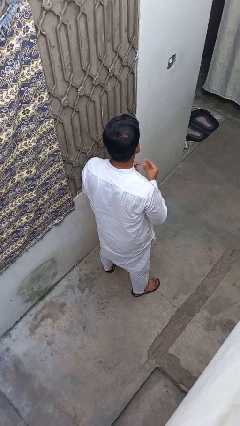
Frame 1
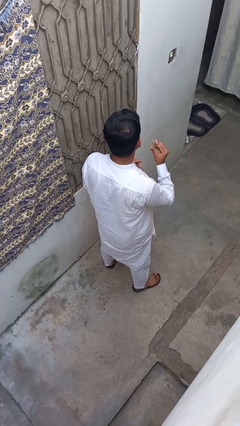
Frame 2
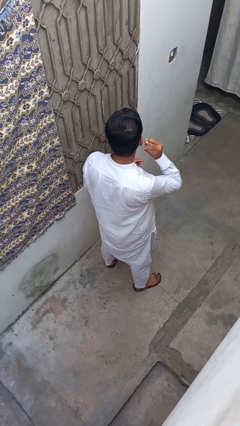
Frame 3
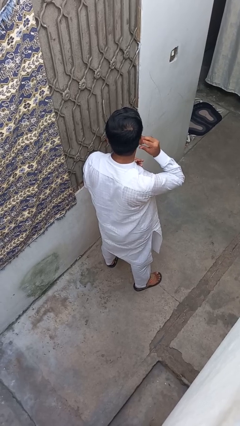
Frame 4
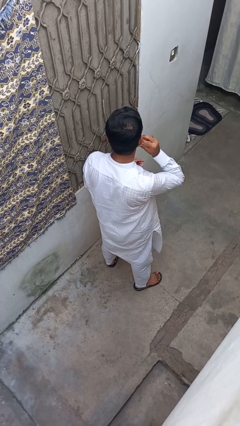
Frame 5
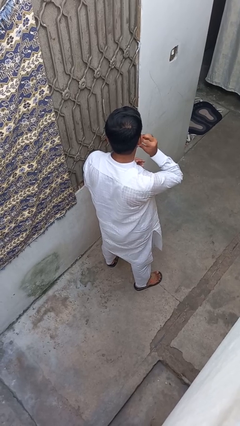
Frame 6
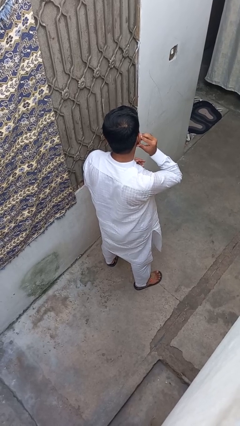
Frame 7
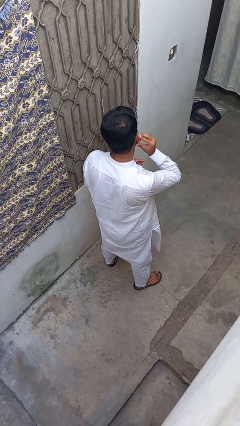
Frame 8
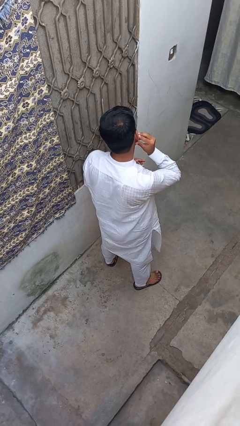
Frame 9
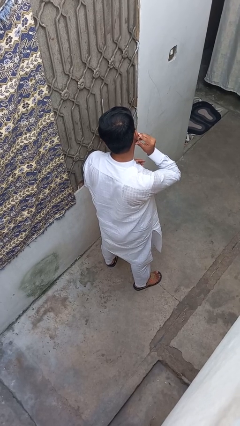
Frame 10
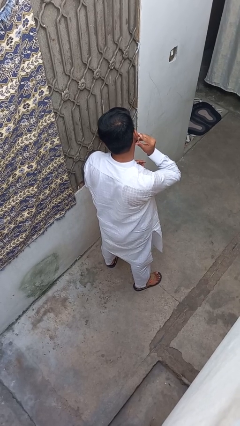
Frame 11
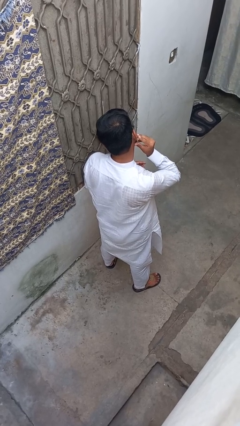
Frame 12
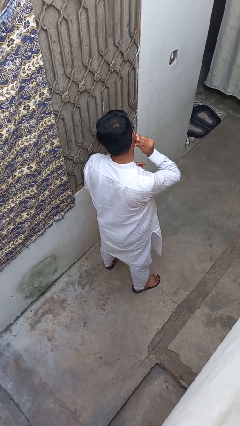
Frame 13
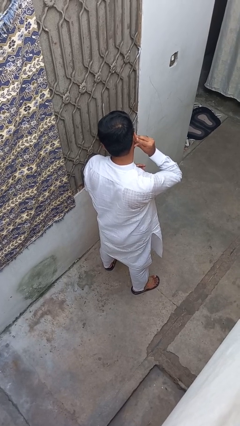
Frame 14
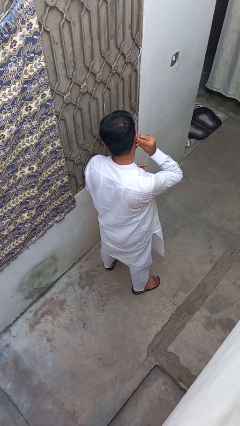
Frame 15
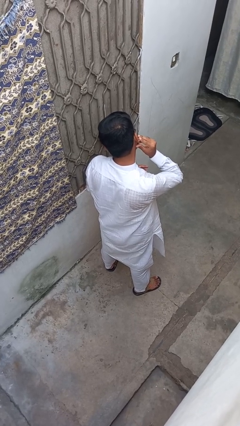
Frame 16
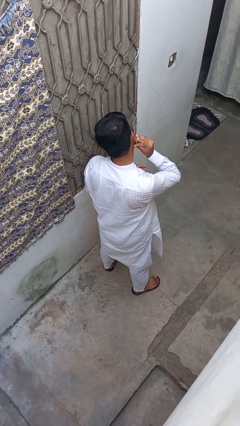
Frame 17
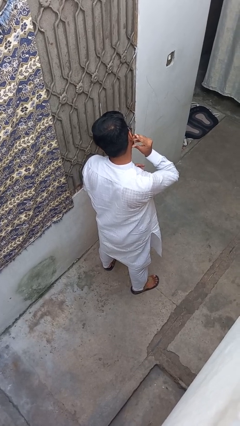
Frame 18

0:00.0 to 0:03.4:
person puts on earrings

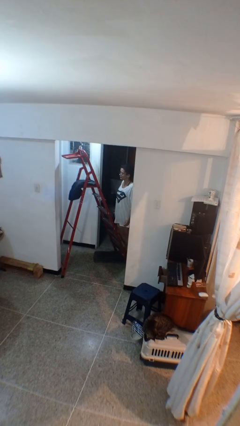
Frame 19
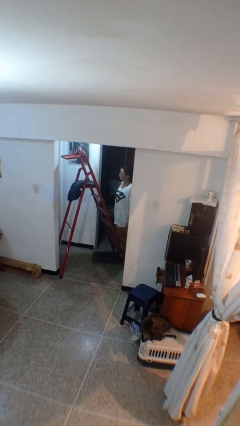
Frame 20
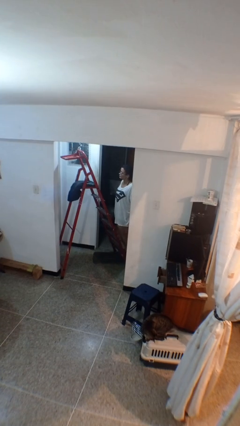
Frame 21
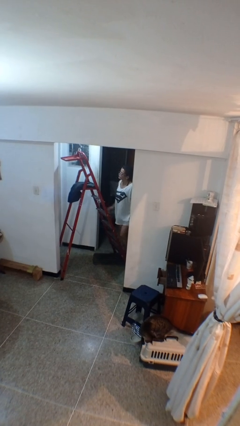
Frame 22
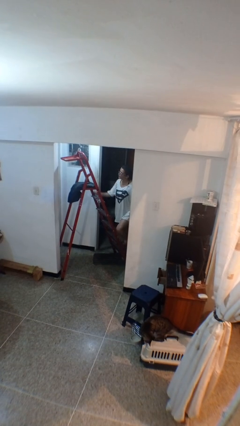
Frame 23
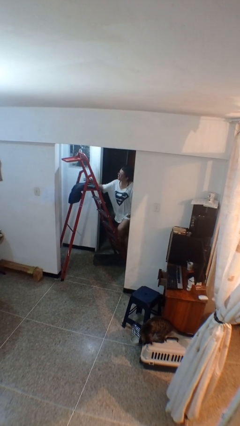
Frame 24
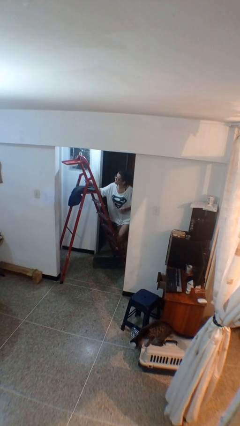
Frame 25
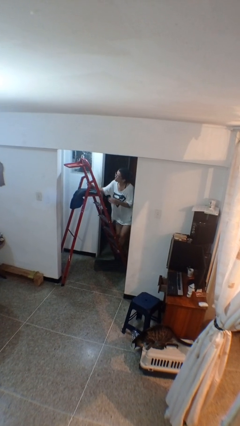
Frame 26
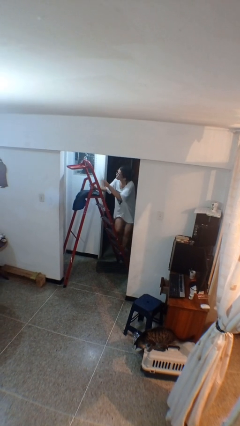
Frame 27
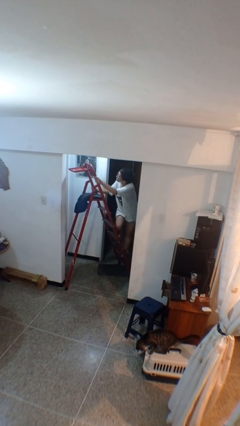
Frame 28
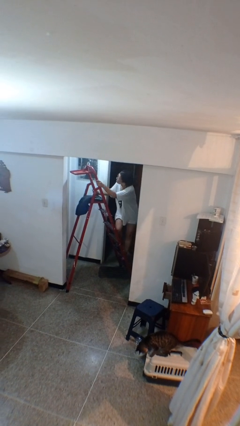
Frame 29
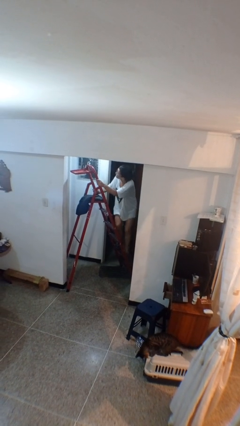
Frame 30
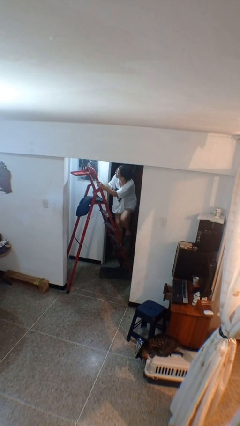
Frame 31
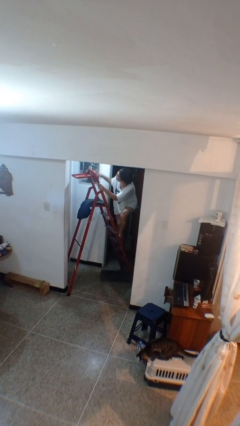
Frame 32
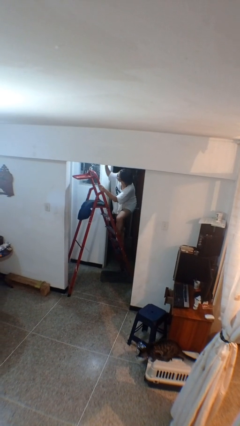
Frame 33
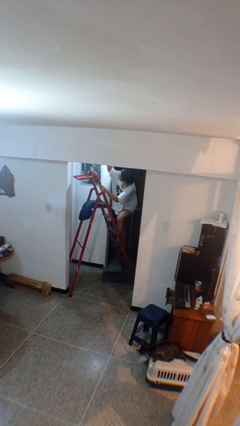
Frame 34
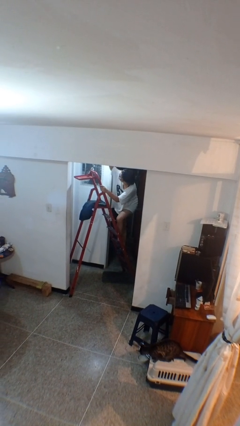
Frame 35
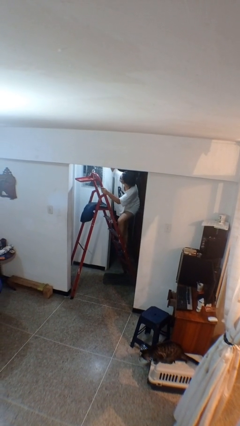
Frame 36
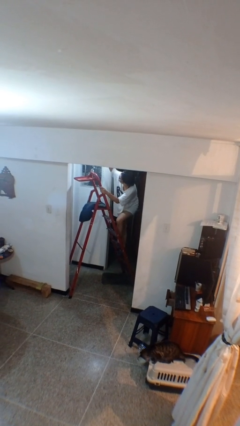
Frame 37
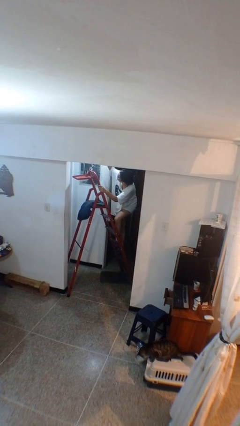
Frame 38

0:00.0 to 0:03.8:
person climbs up ladder

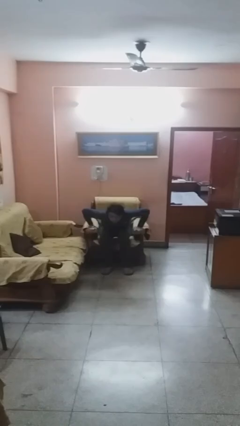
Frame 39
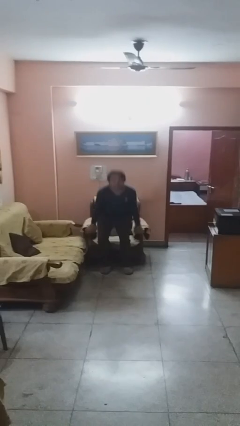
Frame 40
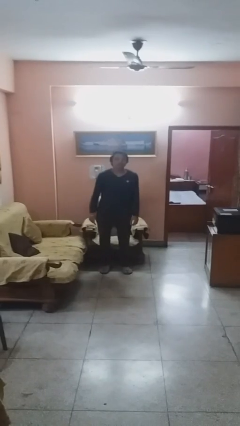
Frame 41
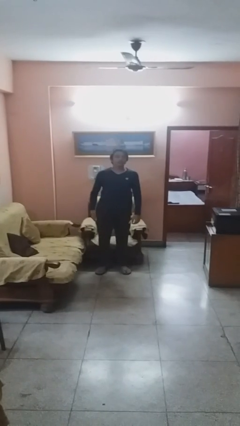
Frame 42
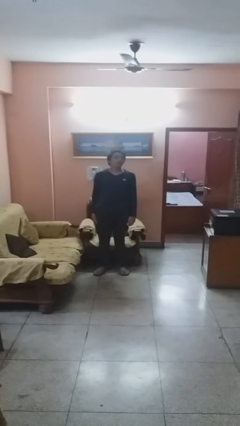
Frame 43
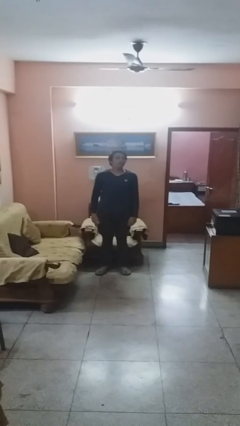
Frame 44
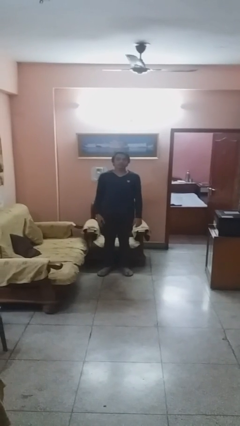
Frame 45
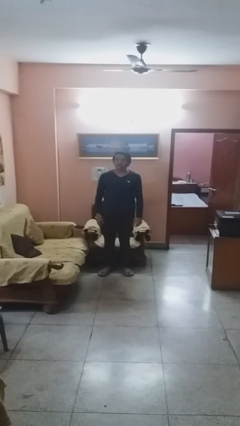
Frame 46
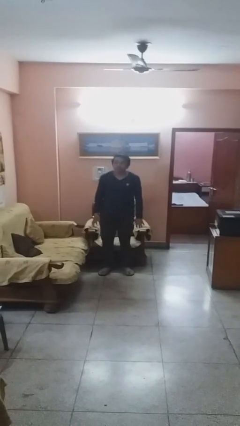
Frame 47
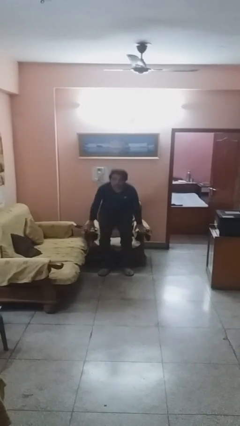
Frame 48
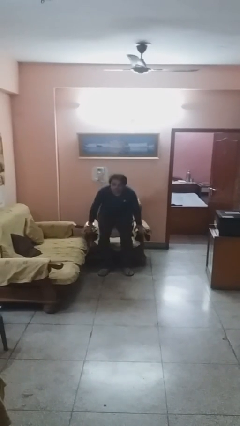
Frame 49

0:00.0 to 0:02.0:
person stands up

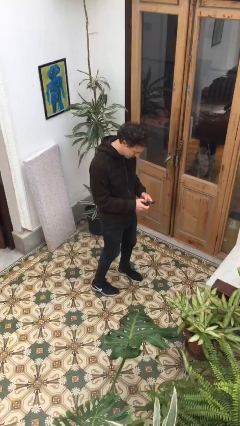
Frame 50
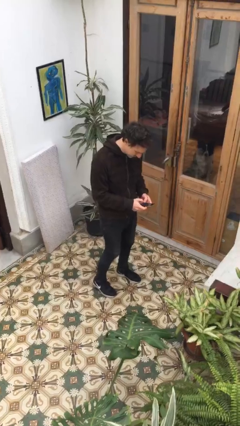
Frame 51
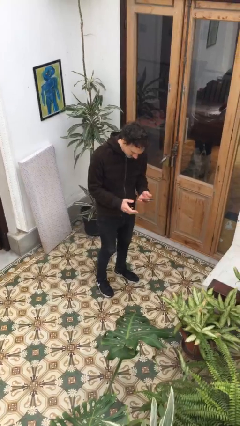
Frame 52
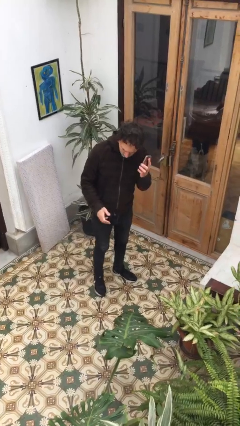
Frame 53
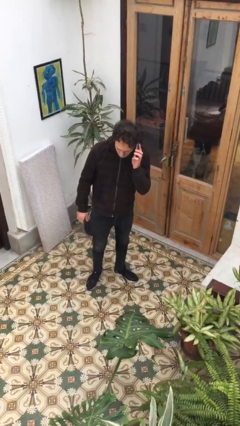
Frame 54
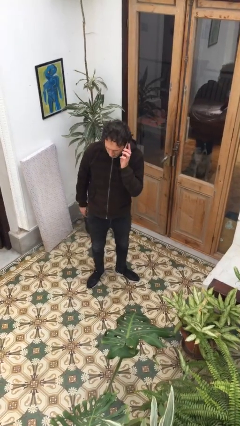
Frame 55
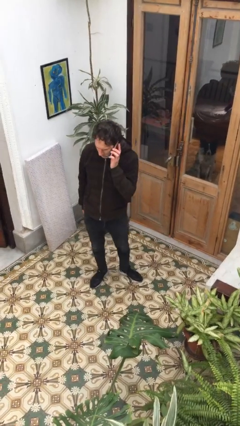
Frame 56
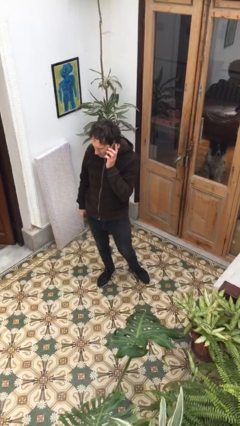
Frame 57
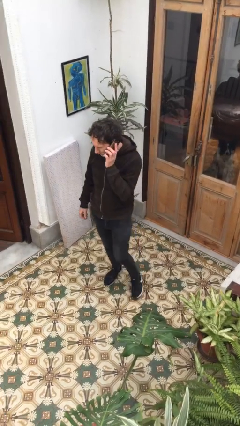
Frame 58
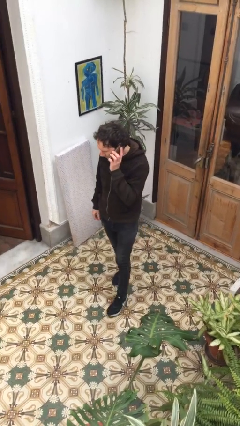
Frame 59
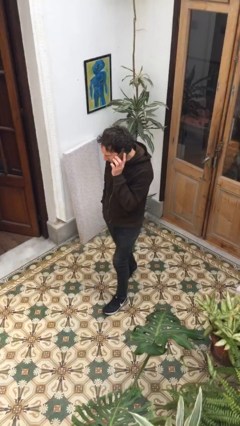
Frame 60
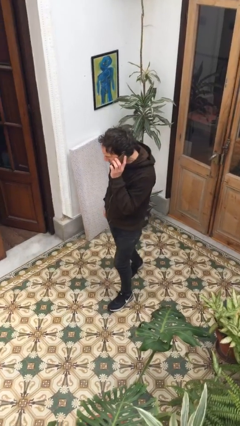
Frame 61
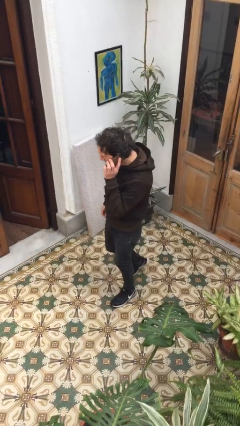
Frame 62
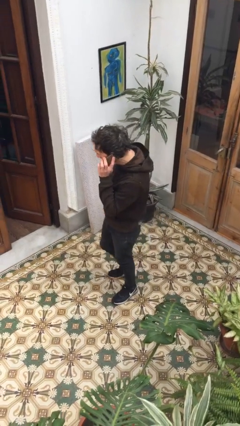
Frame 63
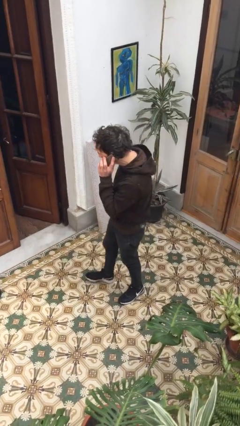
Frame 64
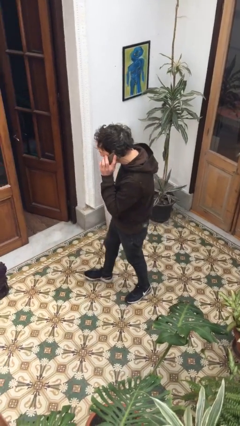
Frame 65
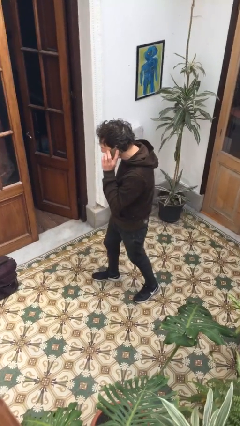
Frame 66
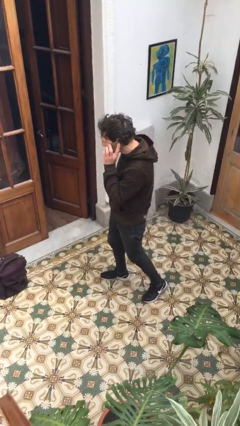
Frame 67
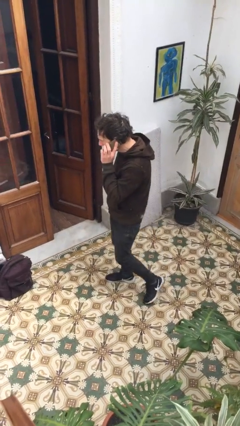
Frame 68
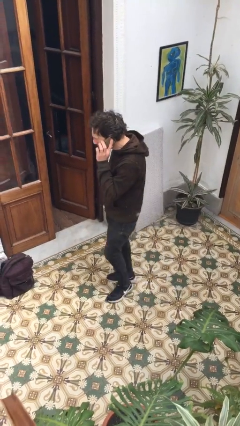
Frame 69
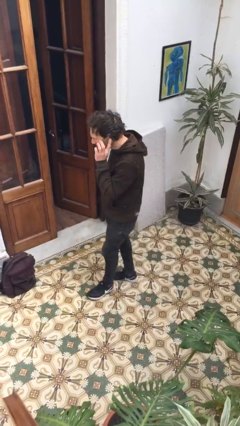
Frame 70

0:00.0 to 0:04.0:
person talks on phone

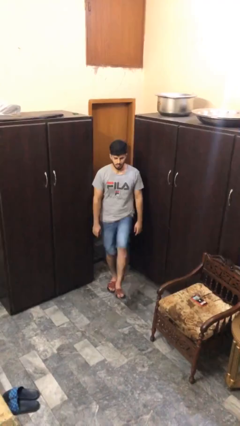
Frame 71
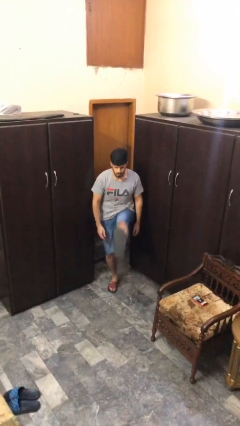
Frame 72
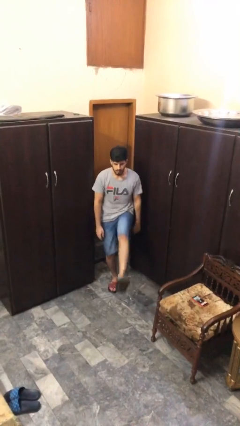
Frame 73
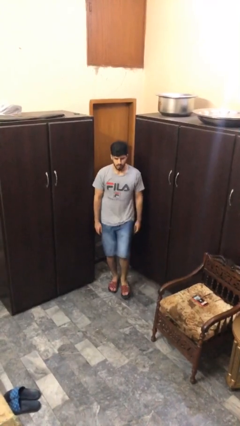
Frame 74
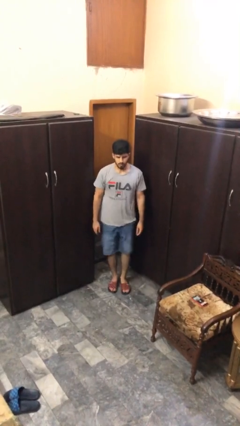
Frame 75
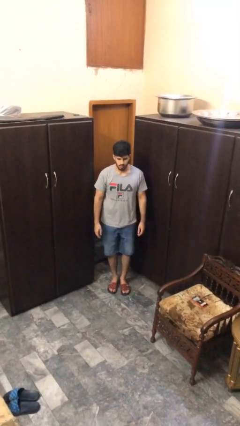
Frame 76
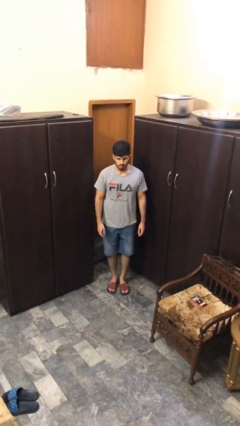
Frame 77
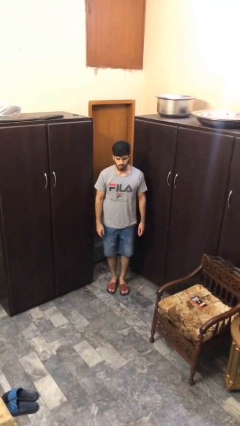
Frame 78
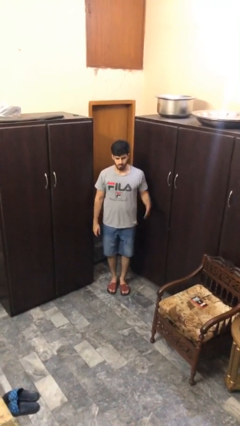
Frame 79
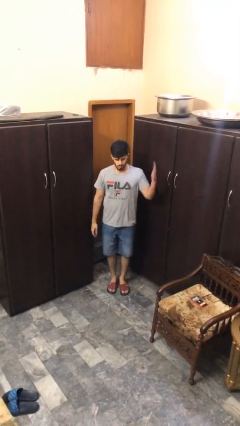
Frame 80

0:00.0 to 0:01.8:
person karate kicks

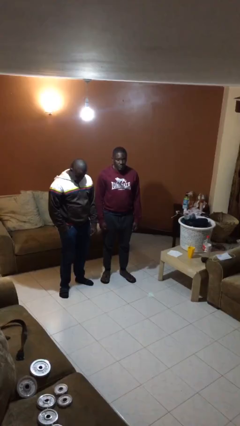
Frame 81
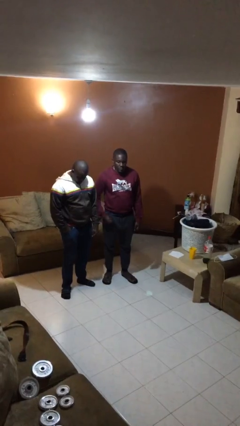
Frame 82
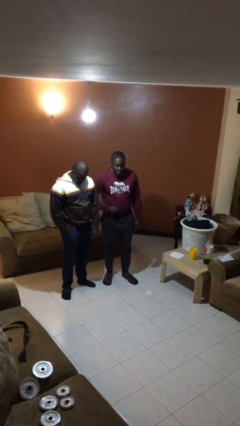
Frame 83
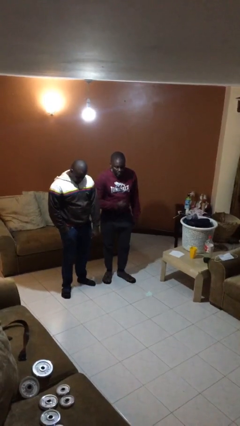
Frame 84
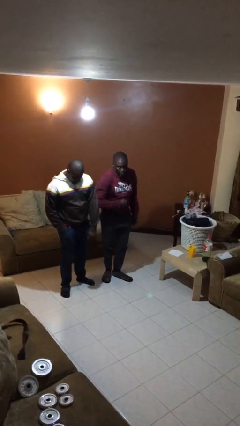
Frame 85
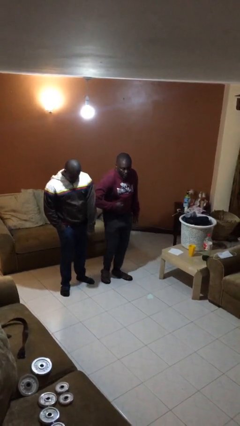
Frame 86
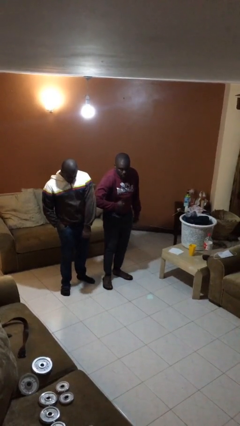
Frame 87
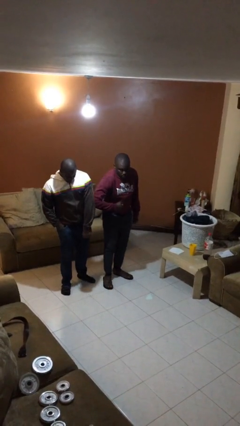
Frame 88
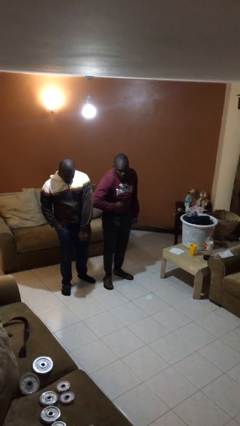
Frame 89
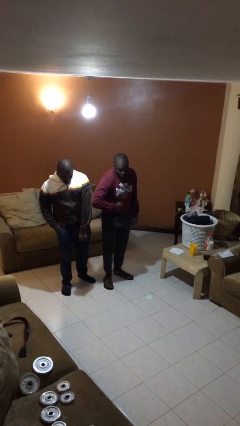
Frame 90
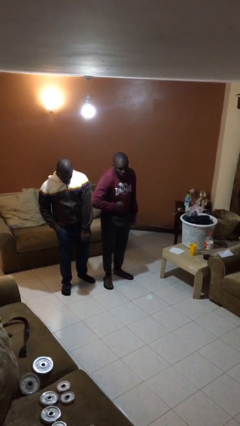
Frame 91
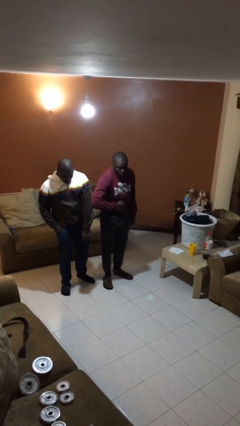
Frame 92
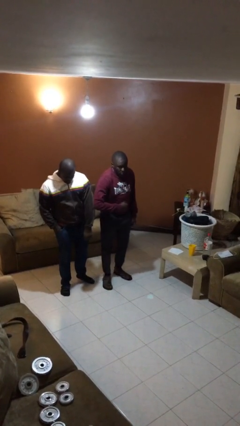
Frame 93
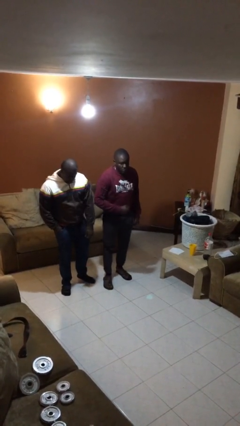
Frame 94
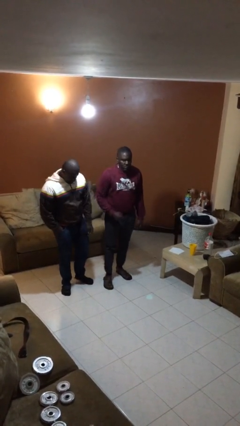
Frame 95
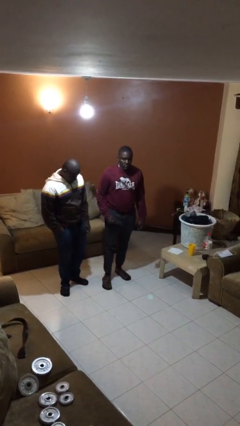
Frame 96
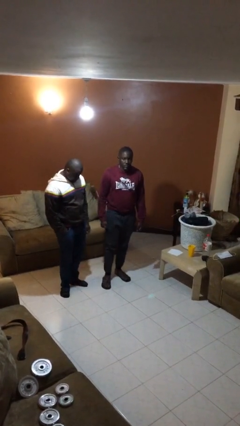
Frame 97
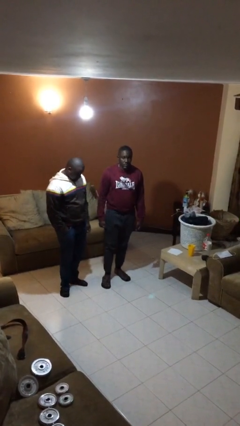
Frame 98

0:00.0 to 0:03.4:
person nudges person with elbow
